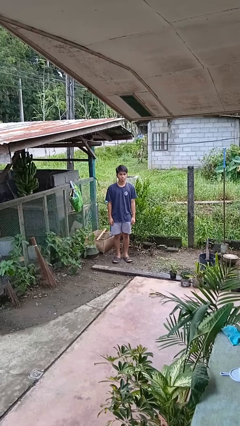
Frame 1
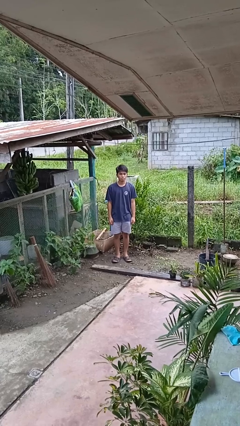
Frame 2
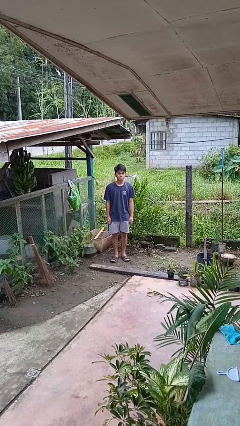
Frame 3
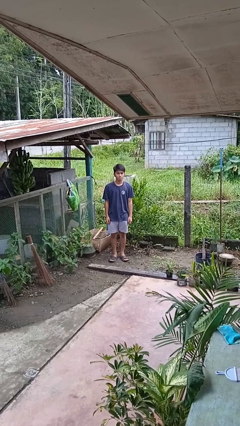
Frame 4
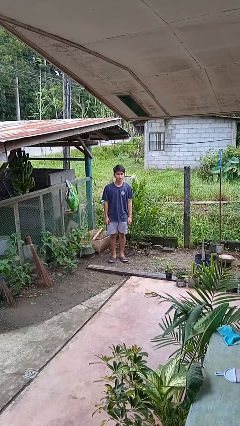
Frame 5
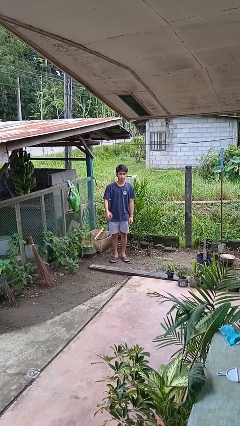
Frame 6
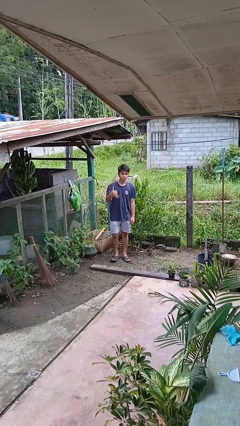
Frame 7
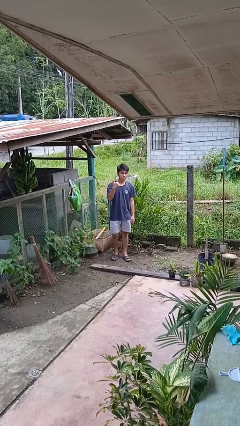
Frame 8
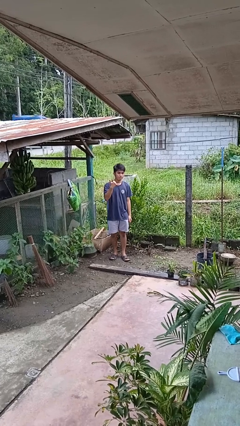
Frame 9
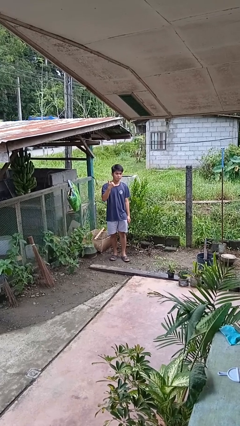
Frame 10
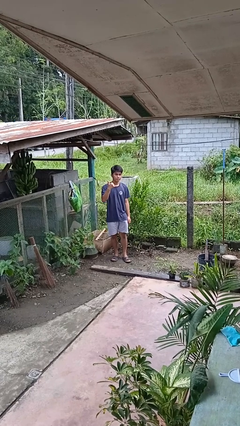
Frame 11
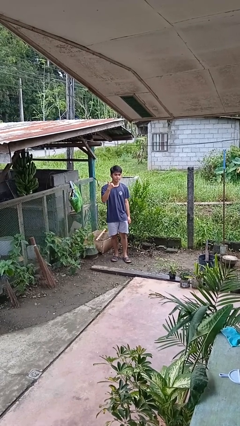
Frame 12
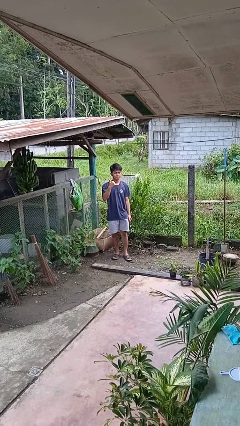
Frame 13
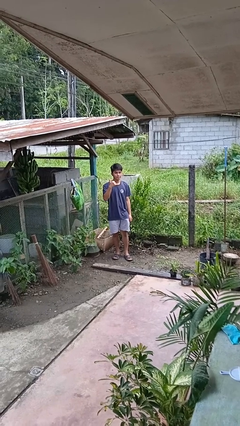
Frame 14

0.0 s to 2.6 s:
person gestures hang loose

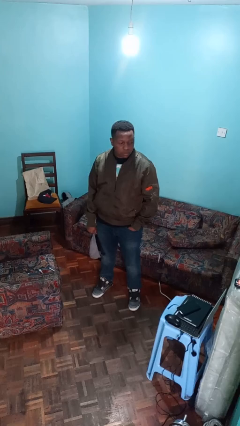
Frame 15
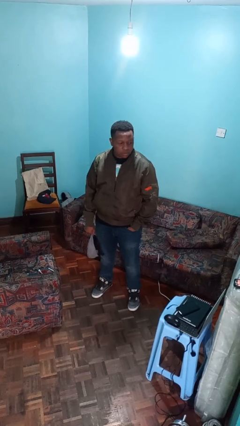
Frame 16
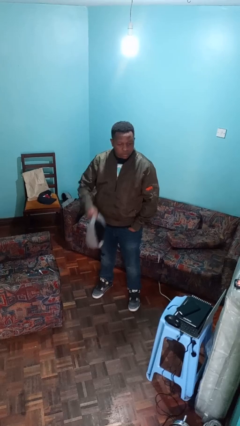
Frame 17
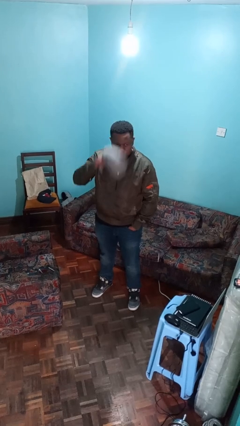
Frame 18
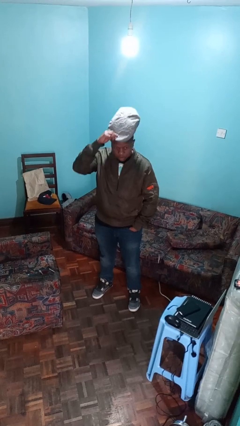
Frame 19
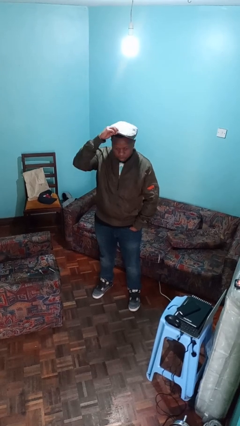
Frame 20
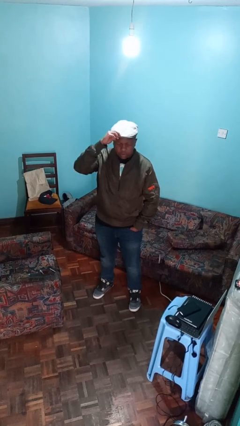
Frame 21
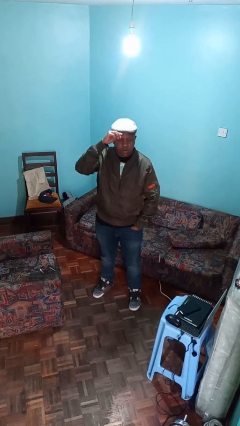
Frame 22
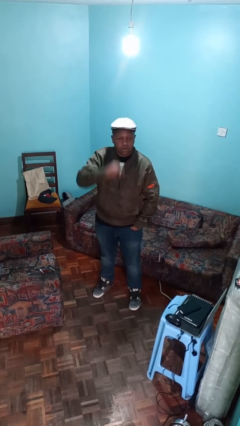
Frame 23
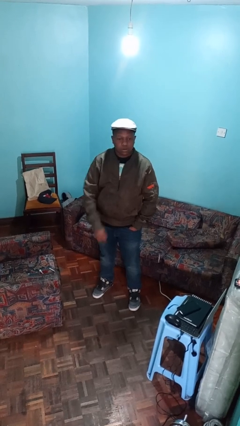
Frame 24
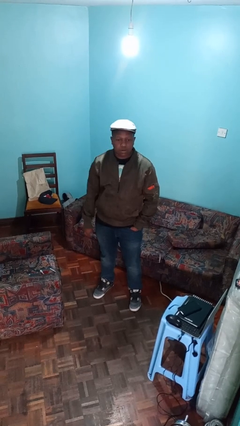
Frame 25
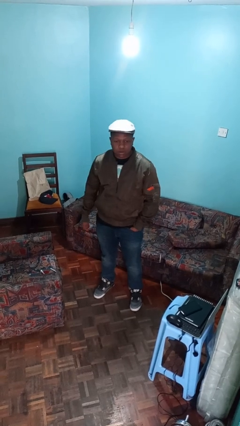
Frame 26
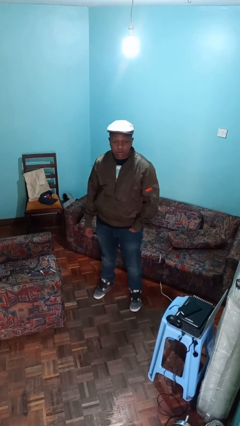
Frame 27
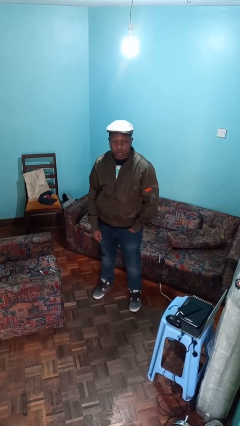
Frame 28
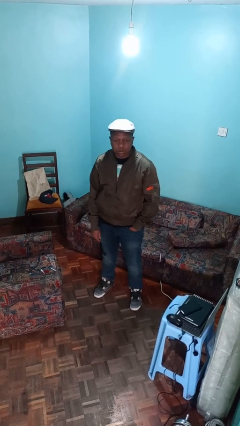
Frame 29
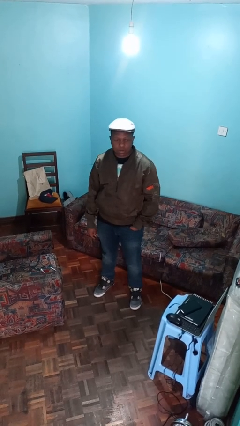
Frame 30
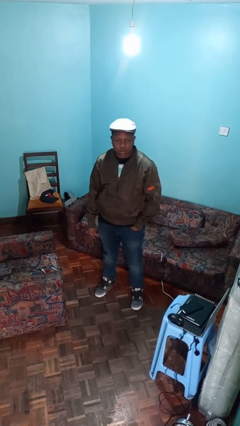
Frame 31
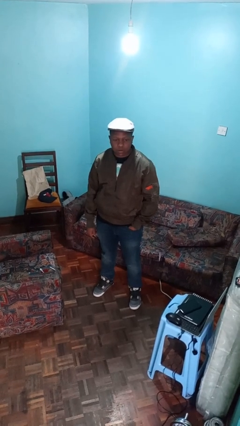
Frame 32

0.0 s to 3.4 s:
person puts on hat

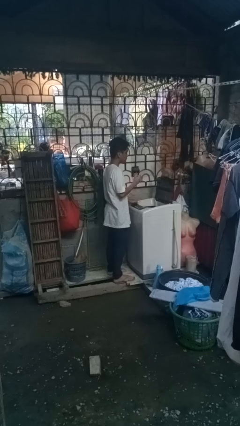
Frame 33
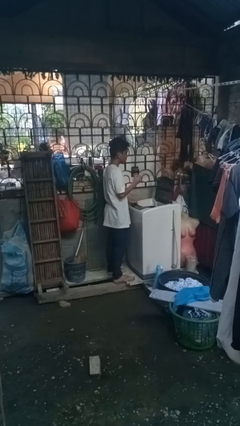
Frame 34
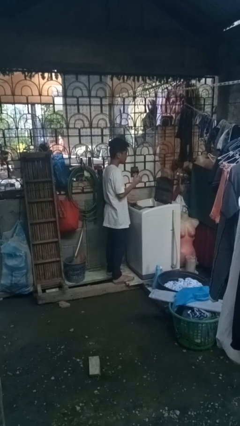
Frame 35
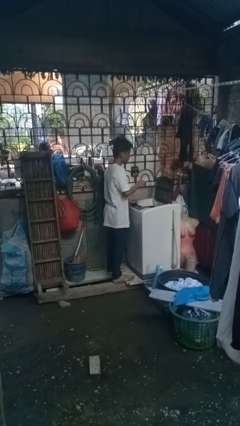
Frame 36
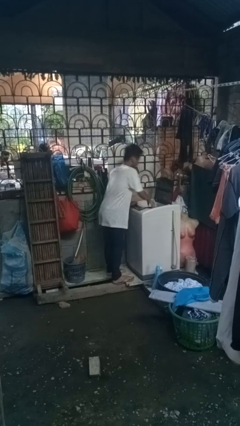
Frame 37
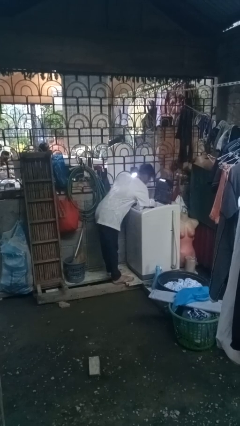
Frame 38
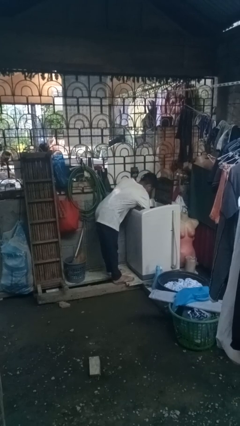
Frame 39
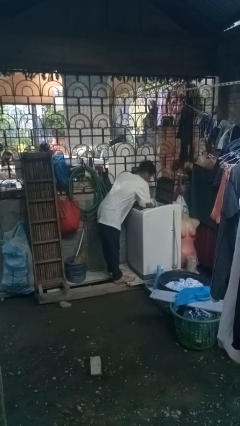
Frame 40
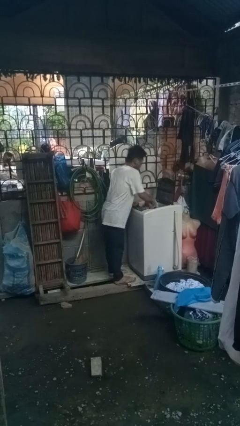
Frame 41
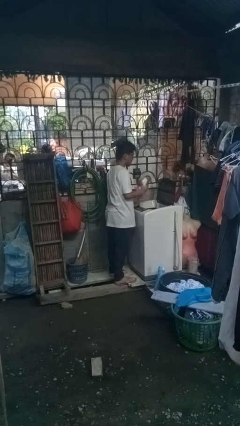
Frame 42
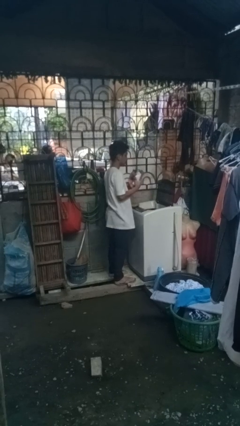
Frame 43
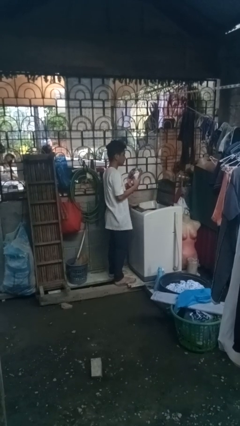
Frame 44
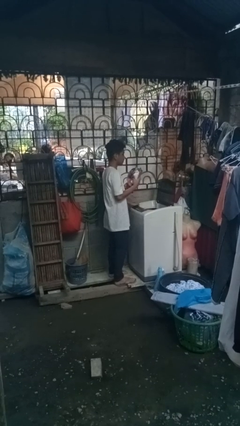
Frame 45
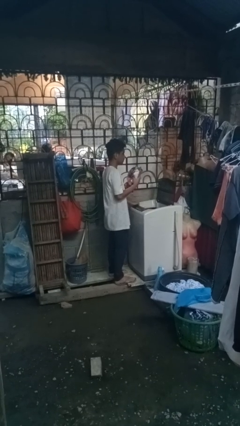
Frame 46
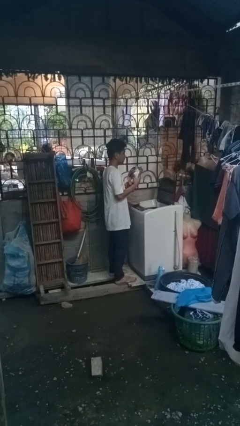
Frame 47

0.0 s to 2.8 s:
person unloads clotheswasher

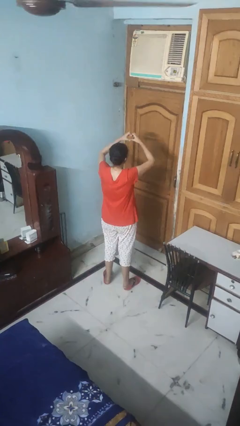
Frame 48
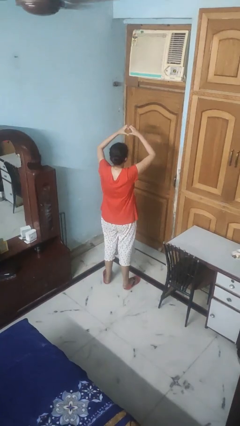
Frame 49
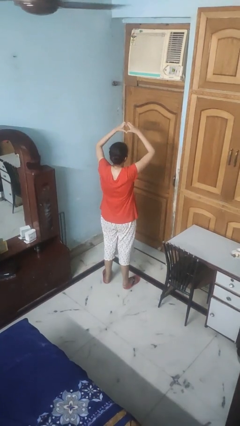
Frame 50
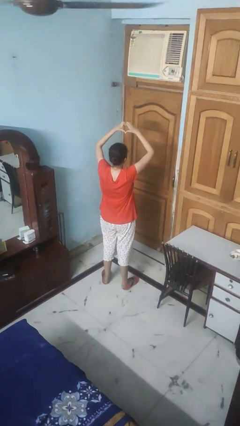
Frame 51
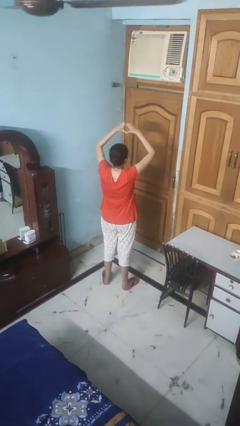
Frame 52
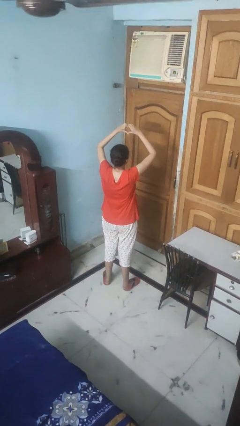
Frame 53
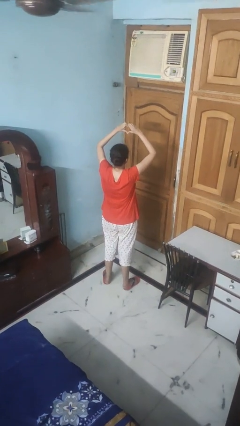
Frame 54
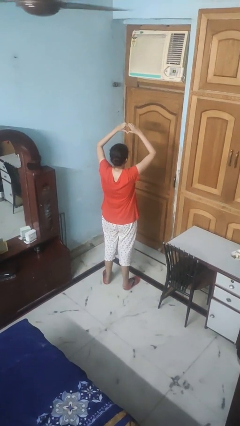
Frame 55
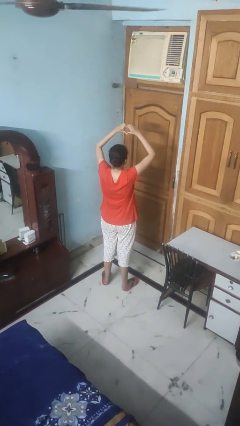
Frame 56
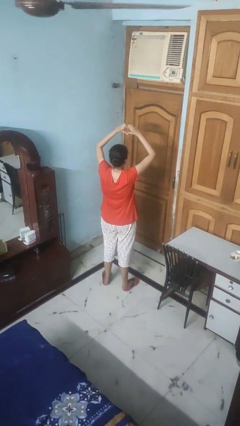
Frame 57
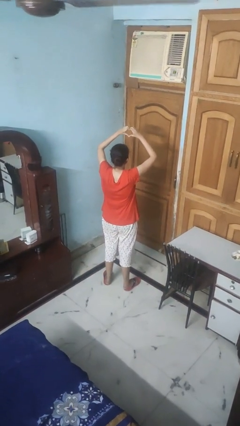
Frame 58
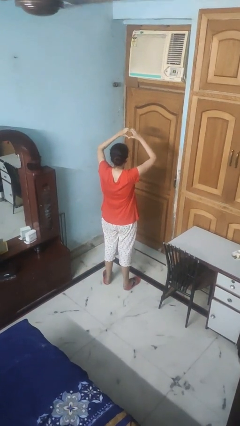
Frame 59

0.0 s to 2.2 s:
person gestures heart

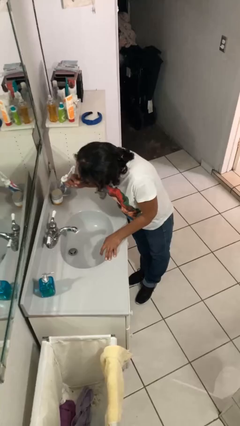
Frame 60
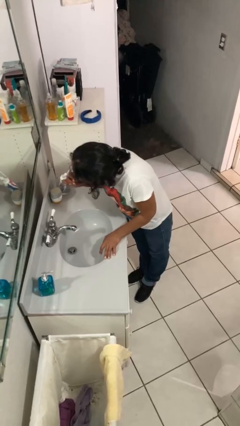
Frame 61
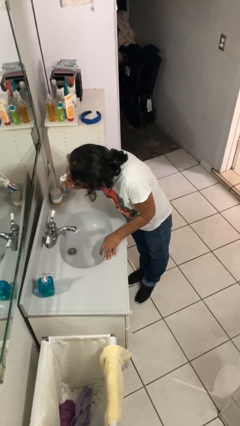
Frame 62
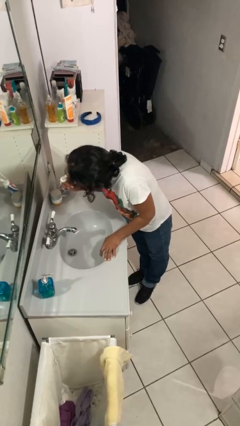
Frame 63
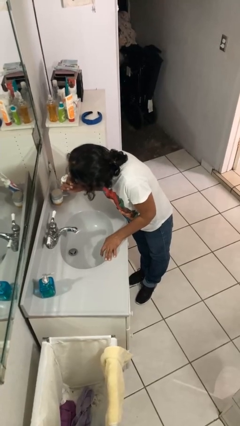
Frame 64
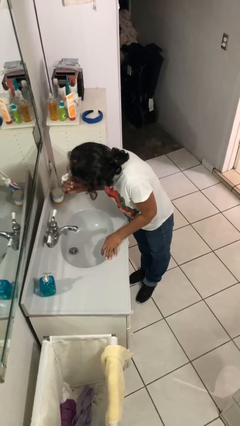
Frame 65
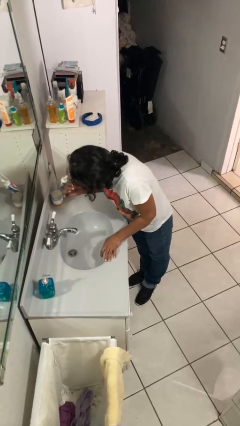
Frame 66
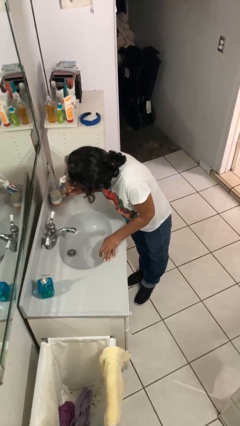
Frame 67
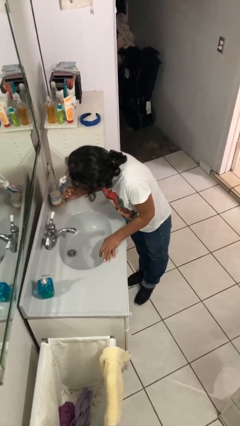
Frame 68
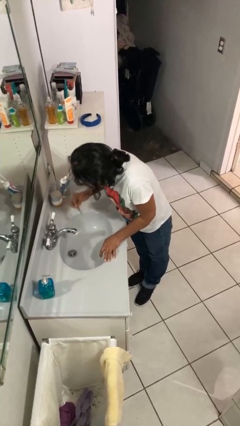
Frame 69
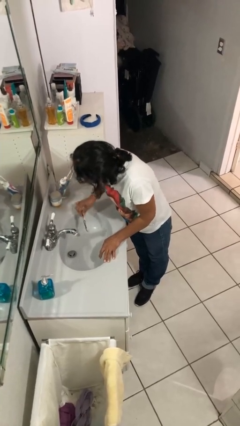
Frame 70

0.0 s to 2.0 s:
person brushes teeth

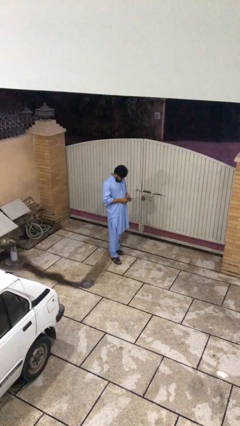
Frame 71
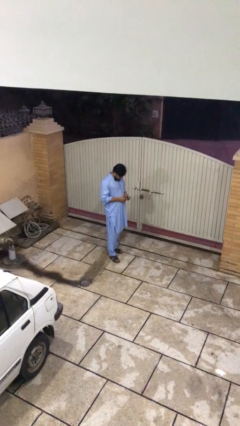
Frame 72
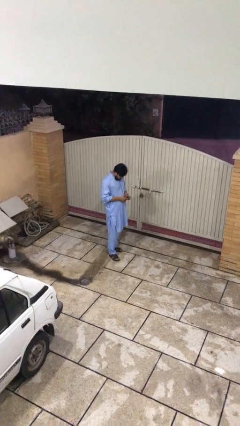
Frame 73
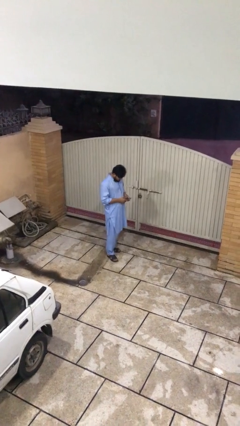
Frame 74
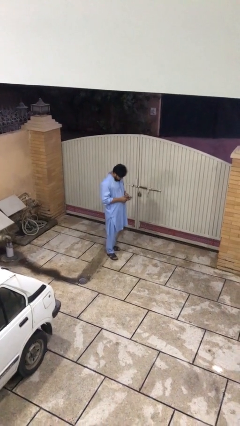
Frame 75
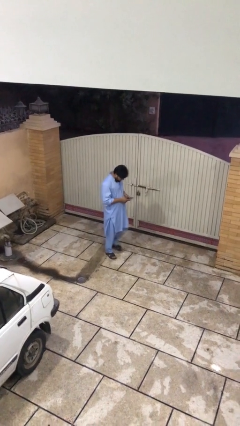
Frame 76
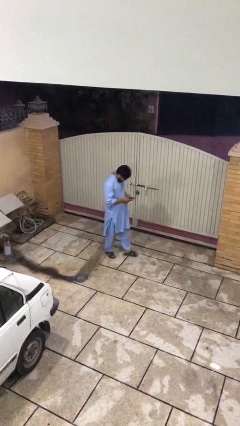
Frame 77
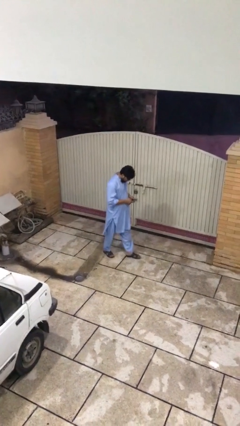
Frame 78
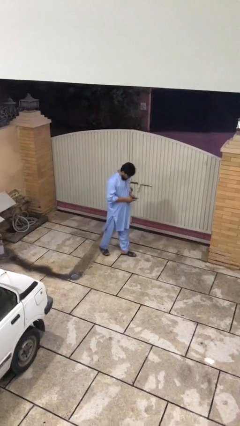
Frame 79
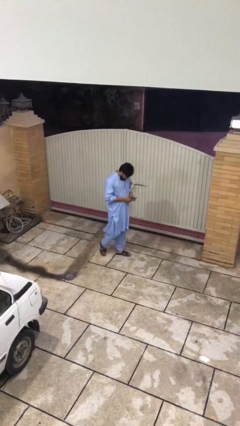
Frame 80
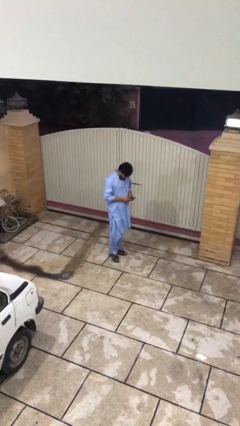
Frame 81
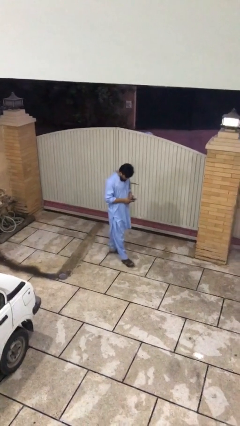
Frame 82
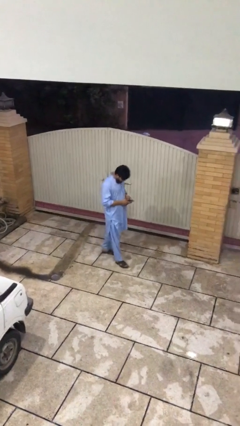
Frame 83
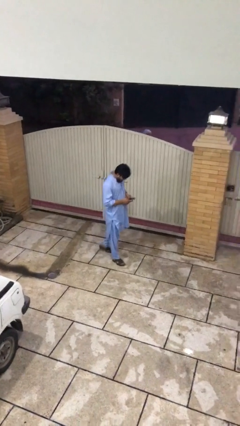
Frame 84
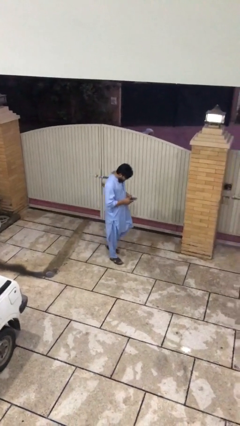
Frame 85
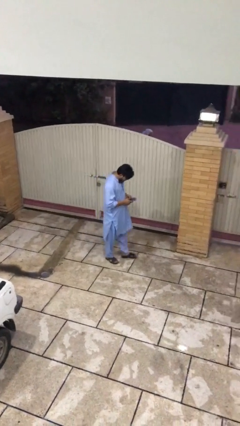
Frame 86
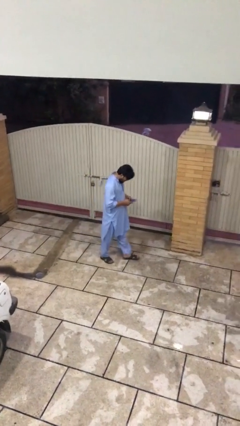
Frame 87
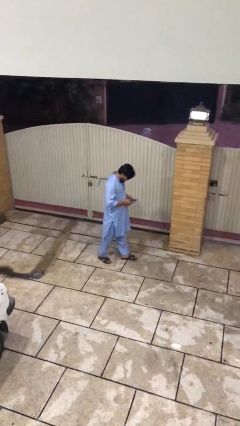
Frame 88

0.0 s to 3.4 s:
person texts on phone

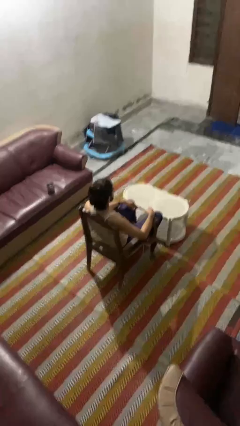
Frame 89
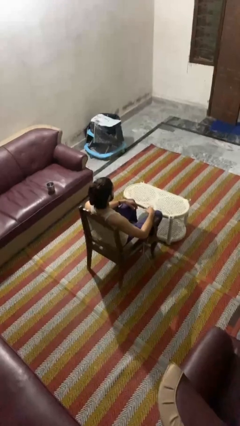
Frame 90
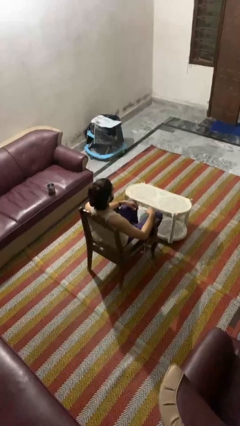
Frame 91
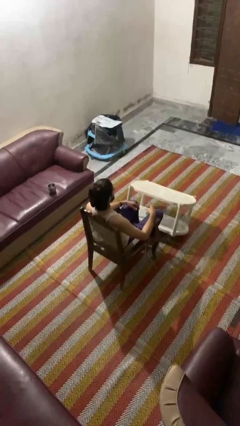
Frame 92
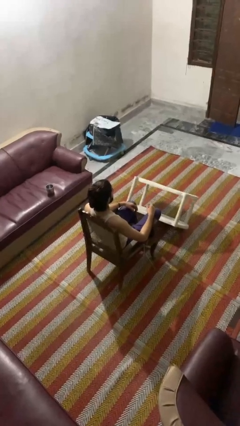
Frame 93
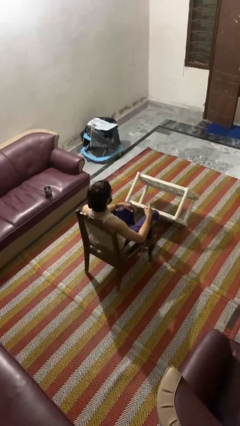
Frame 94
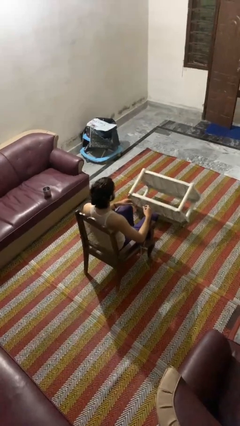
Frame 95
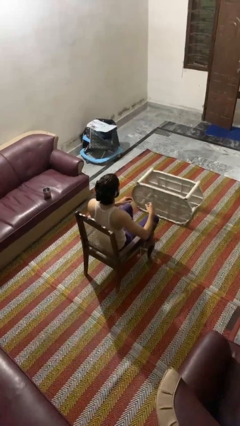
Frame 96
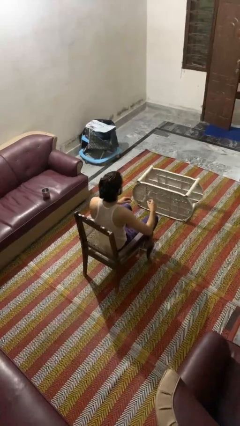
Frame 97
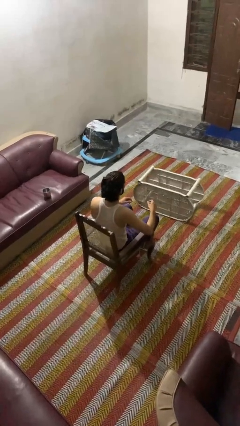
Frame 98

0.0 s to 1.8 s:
person knocks over furniture
